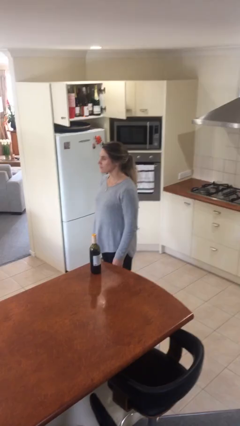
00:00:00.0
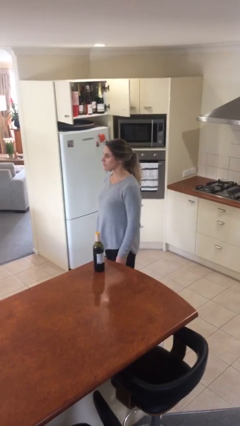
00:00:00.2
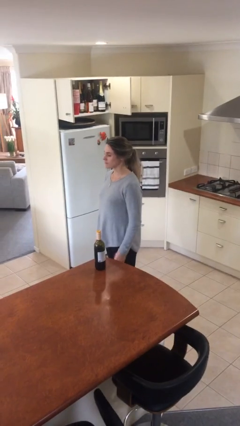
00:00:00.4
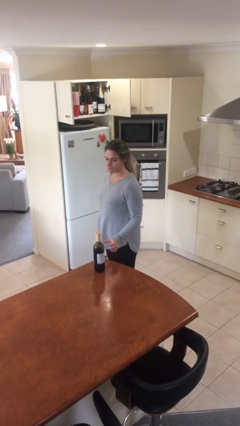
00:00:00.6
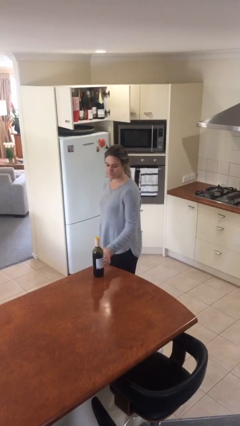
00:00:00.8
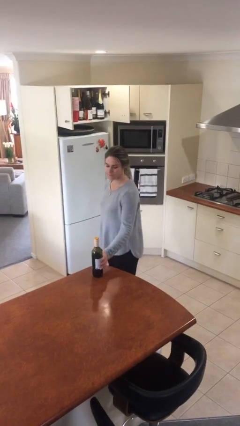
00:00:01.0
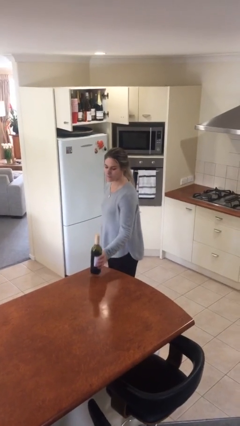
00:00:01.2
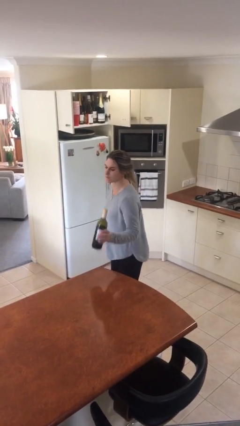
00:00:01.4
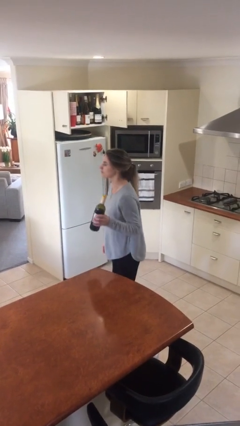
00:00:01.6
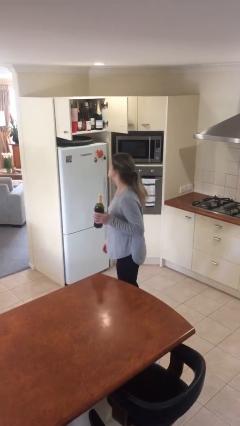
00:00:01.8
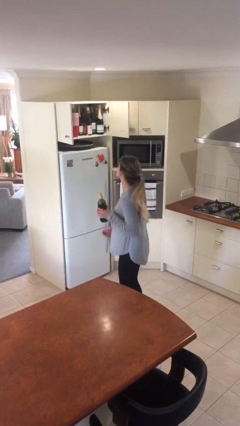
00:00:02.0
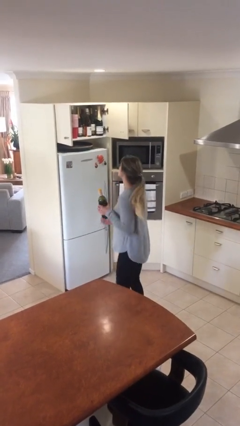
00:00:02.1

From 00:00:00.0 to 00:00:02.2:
person picks up object from table

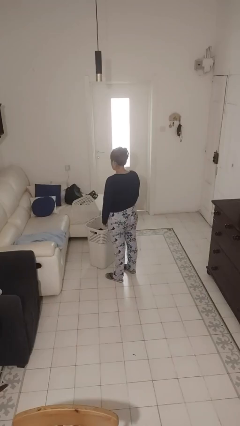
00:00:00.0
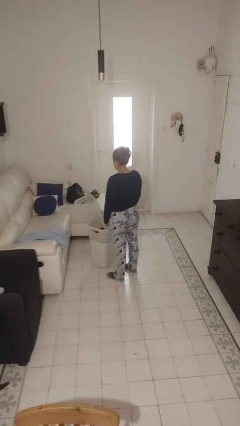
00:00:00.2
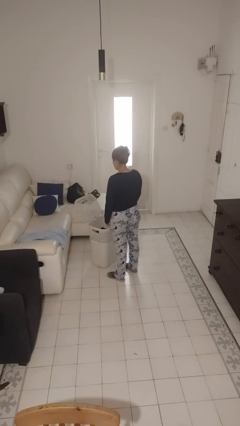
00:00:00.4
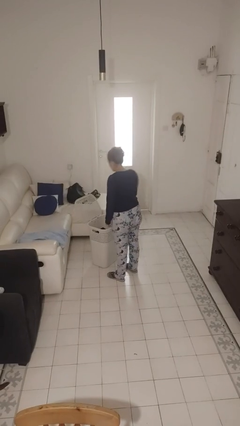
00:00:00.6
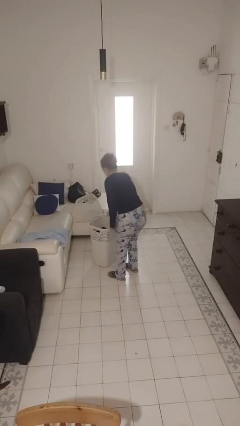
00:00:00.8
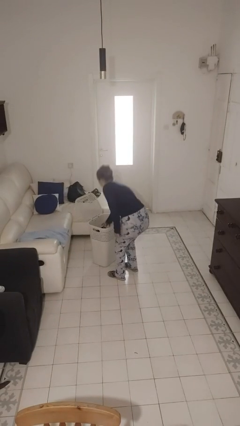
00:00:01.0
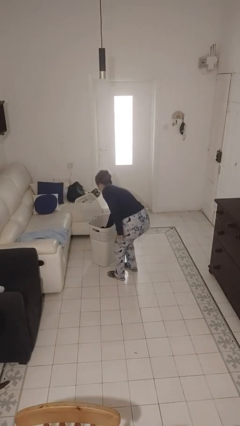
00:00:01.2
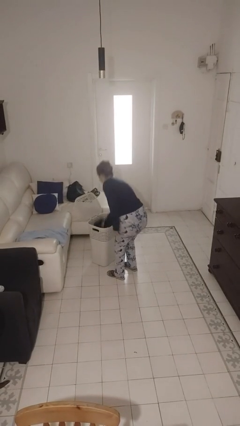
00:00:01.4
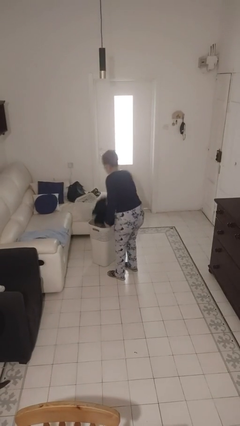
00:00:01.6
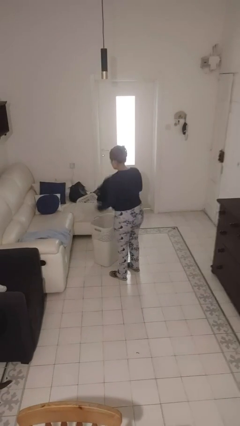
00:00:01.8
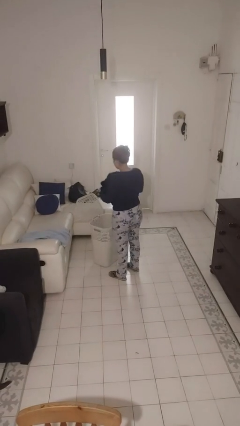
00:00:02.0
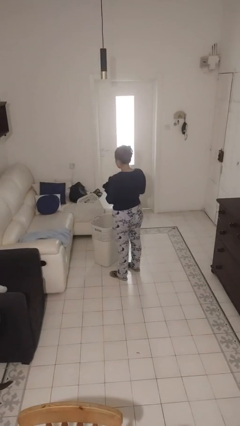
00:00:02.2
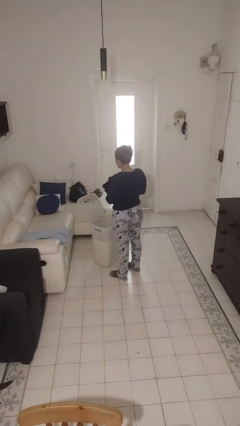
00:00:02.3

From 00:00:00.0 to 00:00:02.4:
person takes object from basket

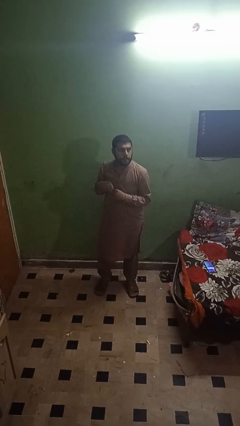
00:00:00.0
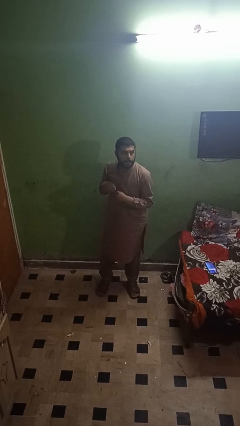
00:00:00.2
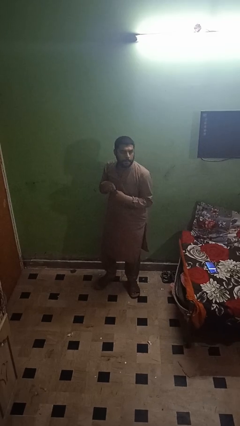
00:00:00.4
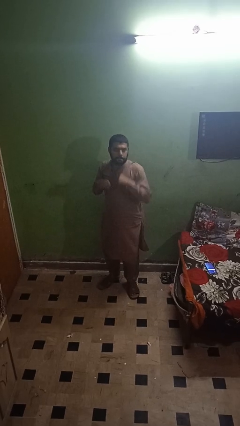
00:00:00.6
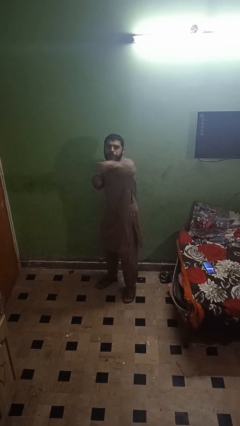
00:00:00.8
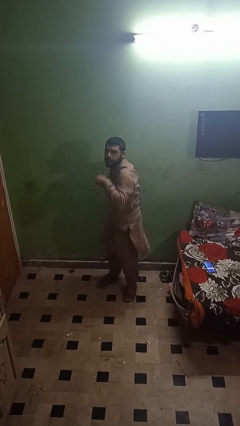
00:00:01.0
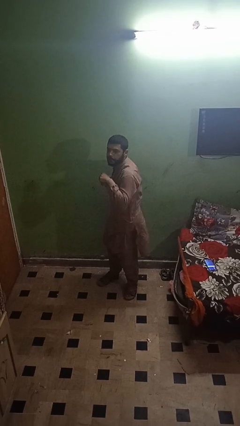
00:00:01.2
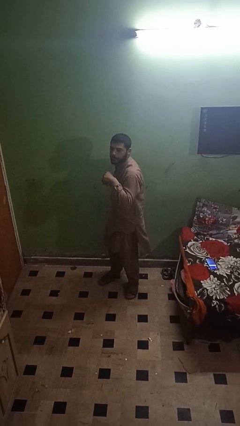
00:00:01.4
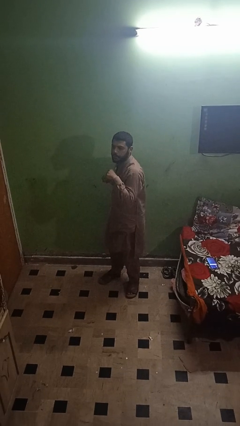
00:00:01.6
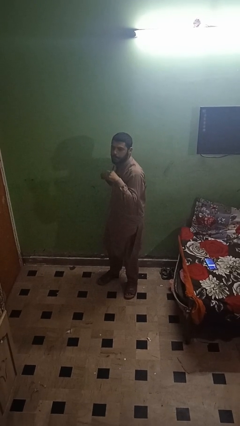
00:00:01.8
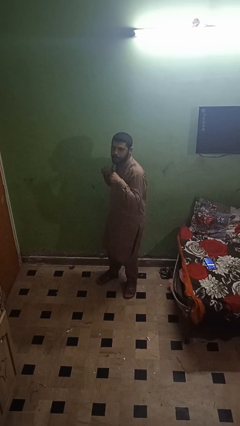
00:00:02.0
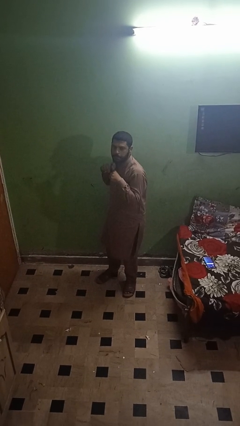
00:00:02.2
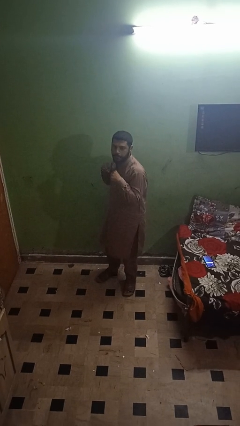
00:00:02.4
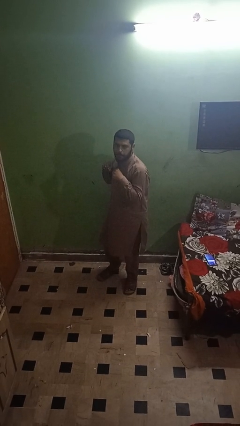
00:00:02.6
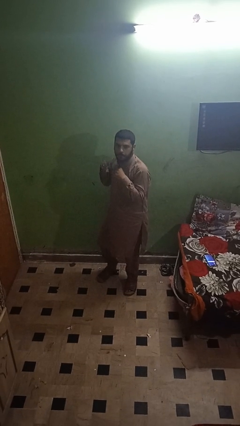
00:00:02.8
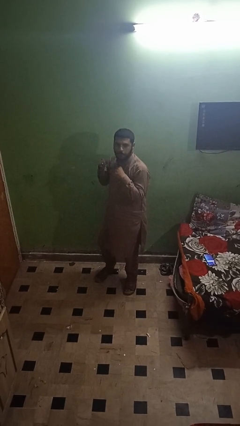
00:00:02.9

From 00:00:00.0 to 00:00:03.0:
person punches

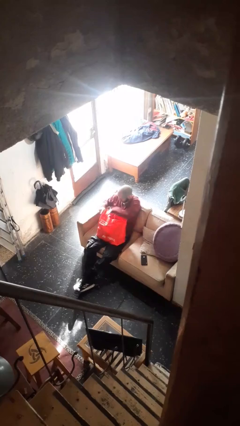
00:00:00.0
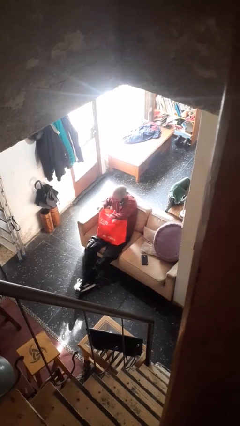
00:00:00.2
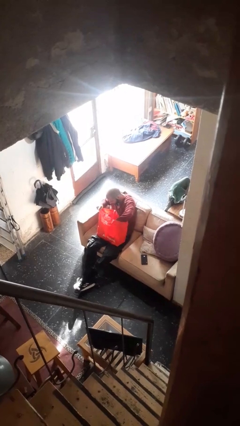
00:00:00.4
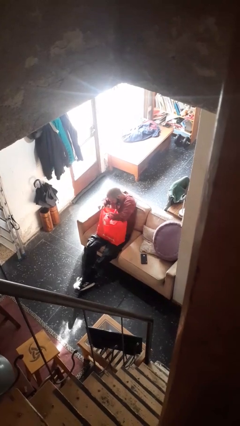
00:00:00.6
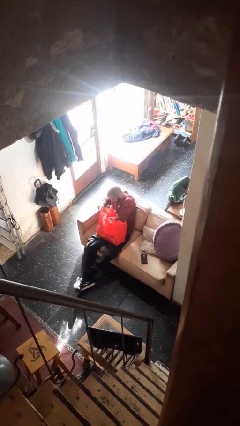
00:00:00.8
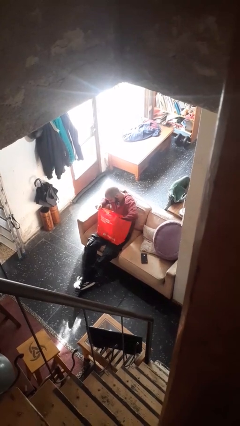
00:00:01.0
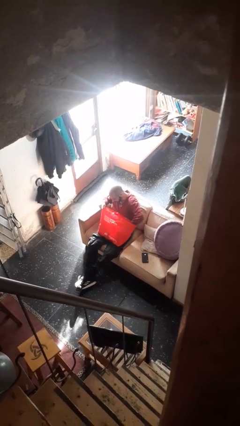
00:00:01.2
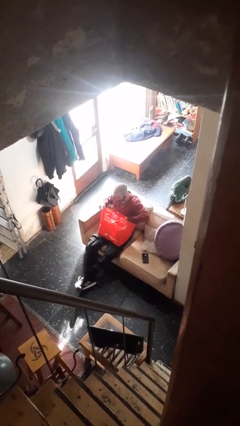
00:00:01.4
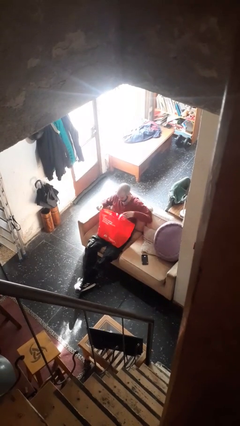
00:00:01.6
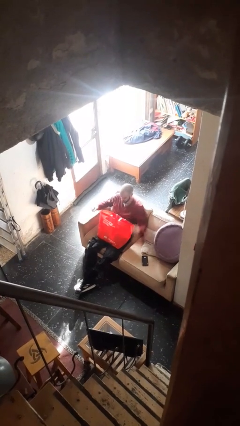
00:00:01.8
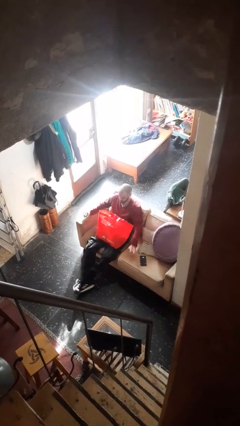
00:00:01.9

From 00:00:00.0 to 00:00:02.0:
person searches in bag

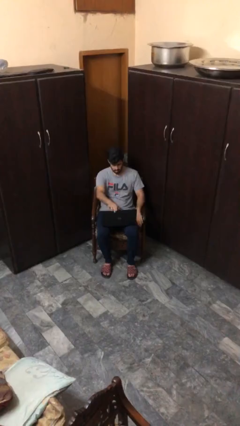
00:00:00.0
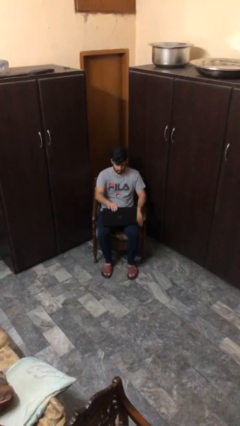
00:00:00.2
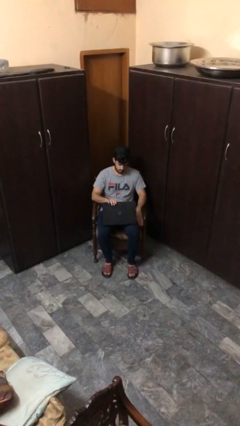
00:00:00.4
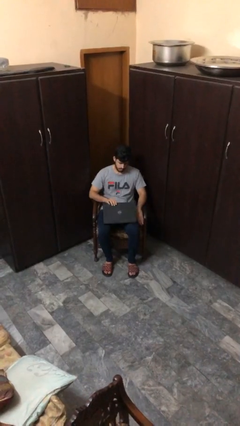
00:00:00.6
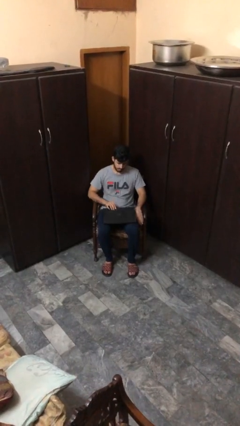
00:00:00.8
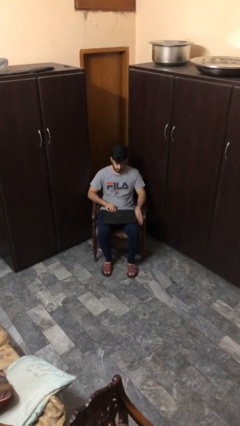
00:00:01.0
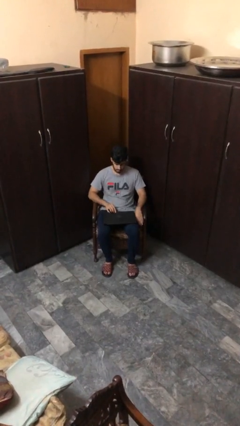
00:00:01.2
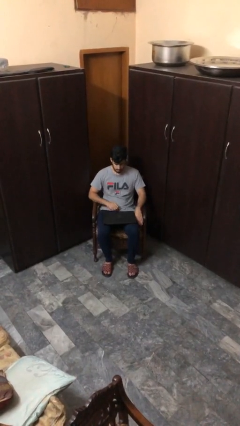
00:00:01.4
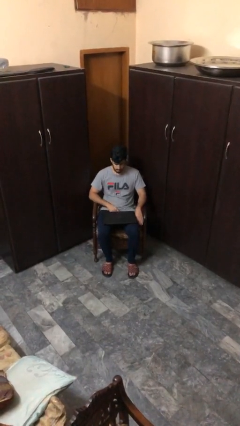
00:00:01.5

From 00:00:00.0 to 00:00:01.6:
person closes laptop

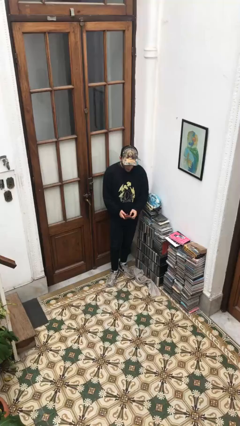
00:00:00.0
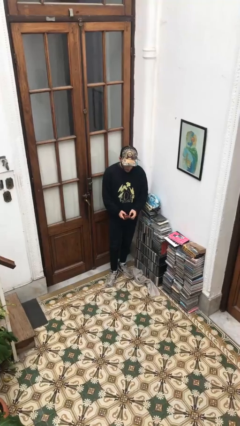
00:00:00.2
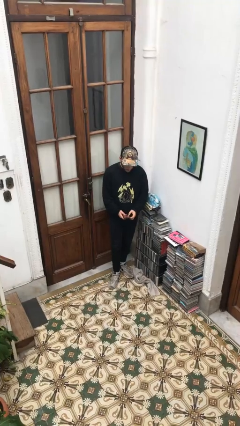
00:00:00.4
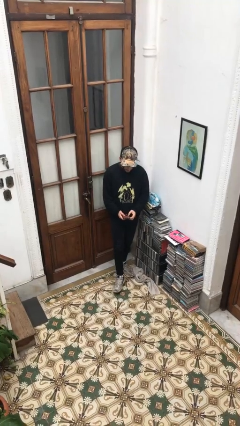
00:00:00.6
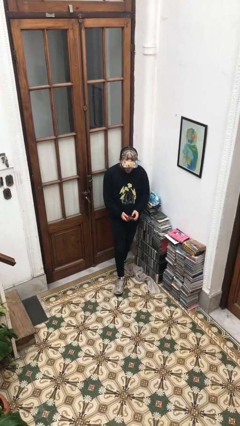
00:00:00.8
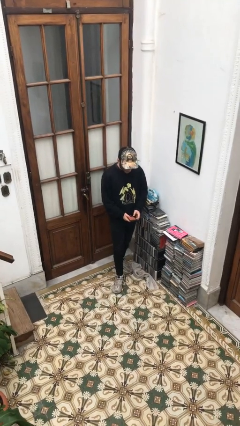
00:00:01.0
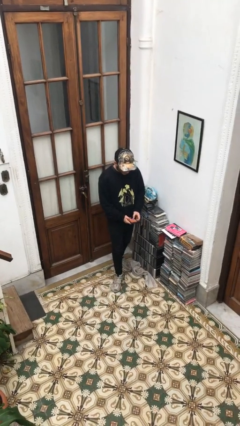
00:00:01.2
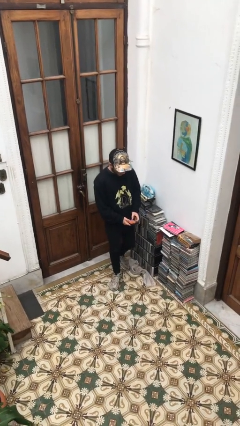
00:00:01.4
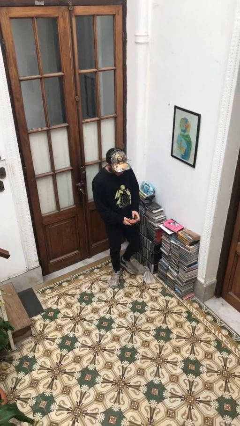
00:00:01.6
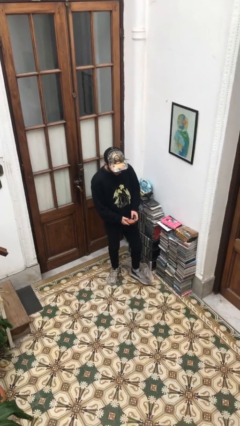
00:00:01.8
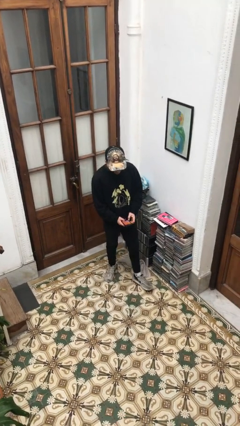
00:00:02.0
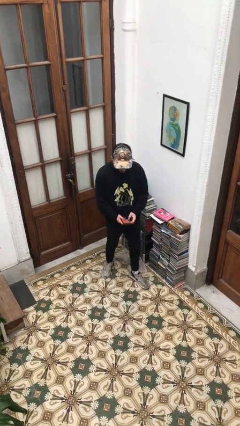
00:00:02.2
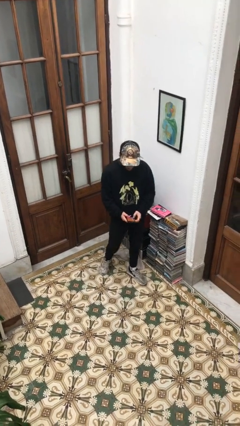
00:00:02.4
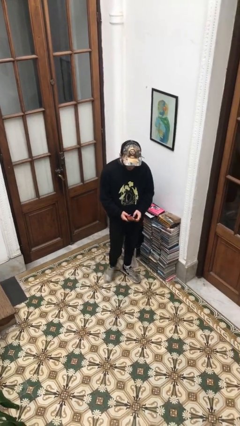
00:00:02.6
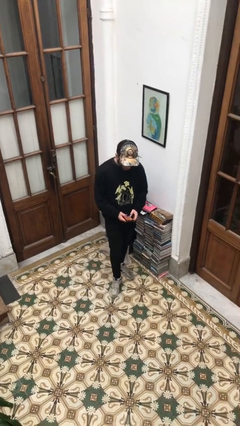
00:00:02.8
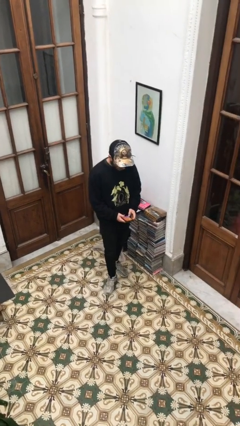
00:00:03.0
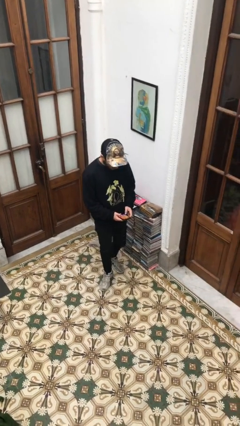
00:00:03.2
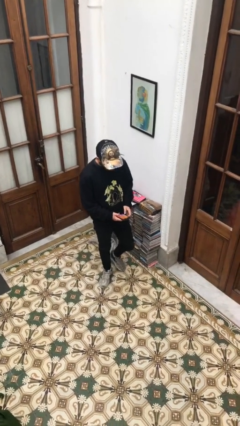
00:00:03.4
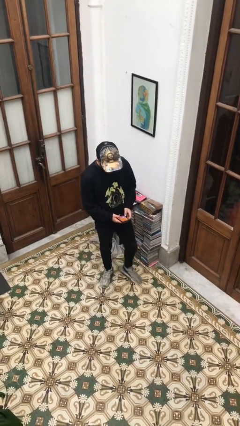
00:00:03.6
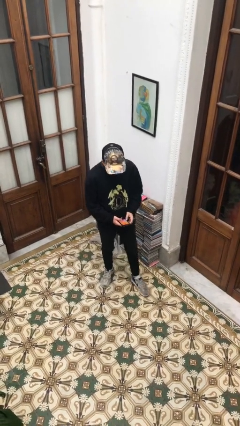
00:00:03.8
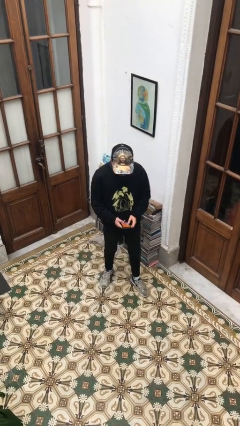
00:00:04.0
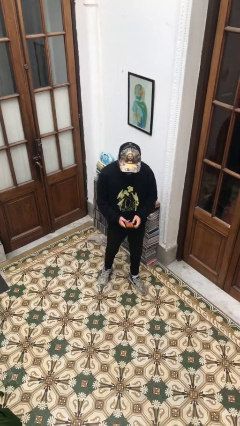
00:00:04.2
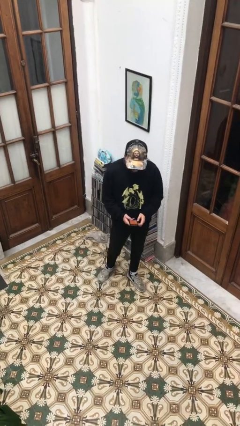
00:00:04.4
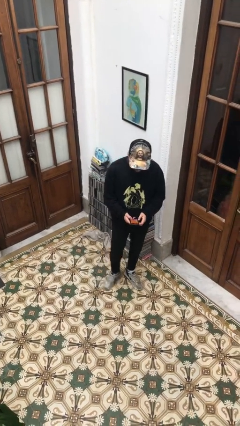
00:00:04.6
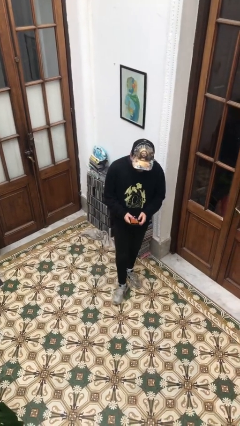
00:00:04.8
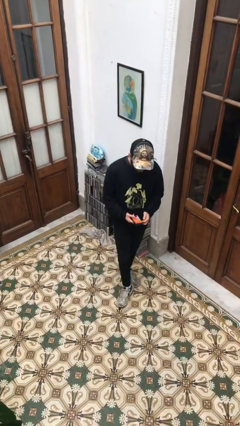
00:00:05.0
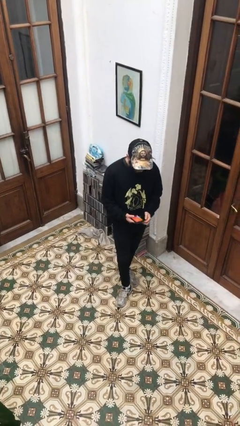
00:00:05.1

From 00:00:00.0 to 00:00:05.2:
person texts on phone

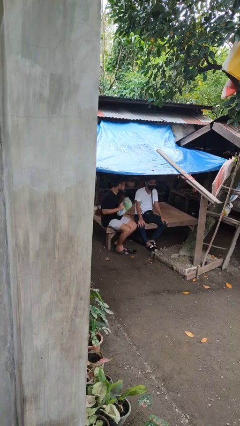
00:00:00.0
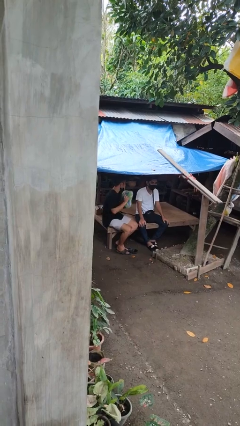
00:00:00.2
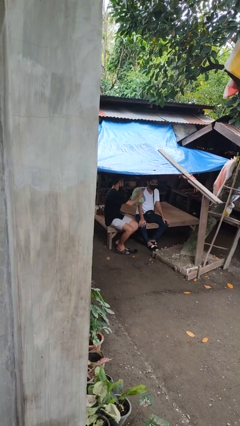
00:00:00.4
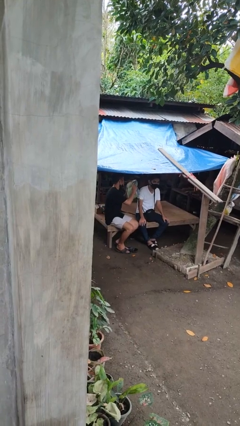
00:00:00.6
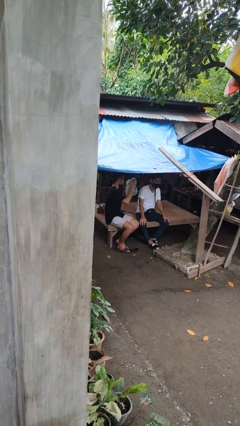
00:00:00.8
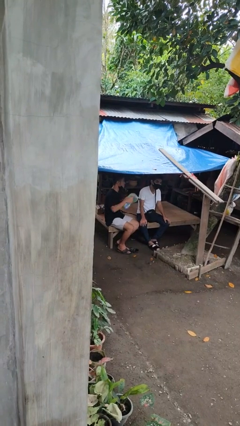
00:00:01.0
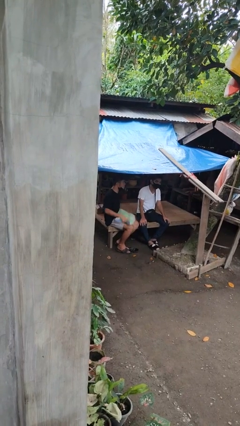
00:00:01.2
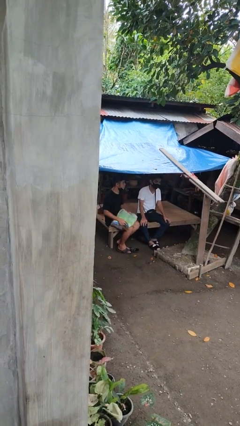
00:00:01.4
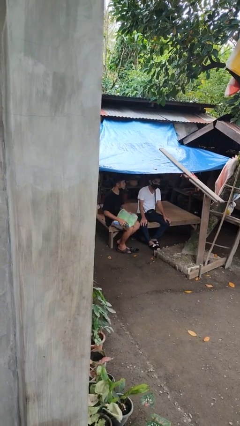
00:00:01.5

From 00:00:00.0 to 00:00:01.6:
person hits person with pillow
